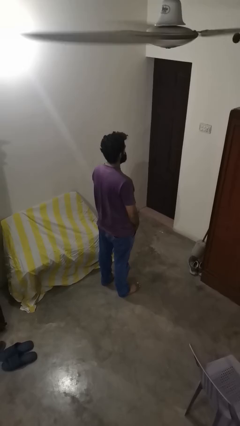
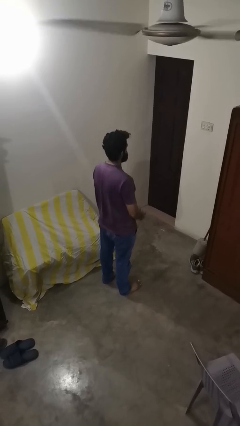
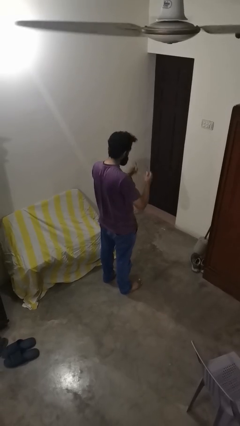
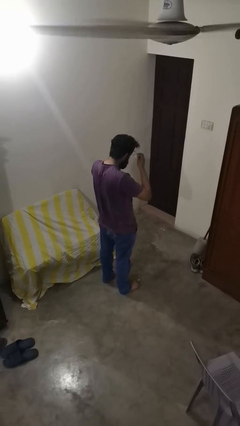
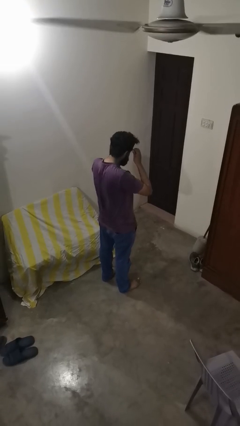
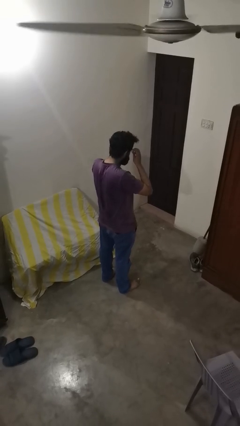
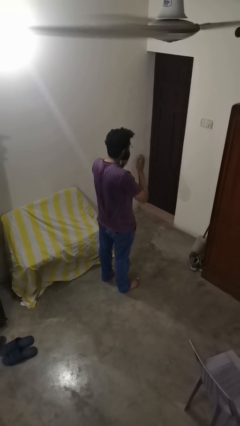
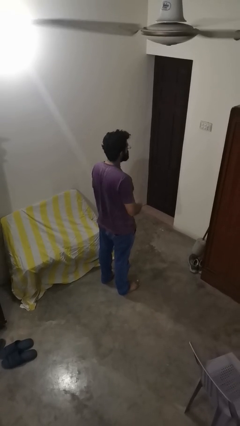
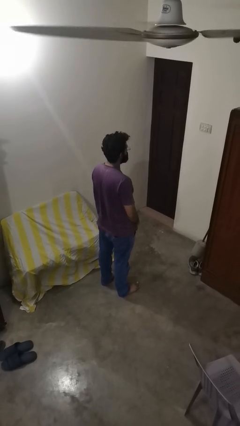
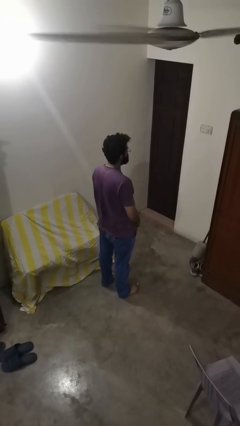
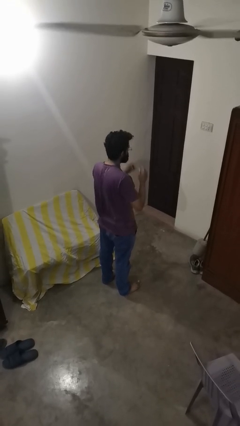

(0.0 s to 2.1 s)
person puts on glasses

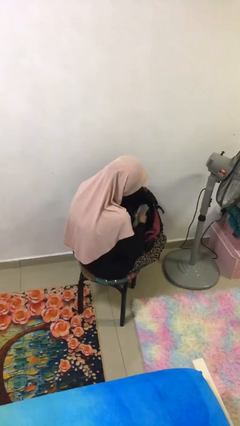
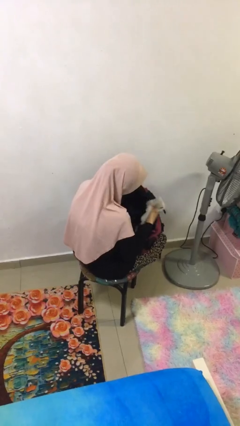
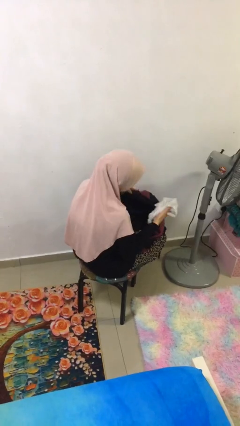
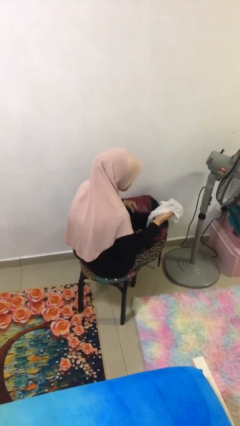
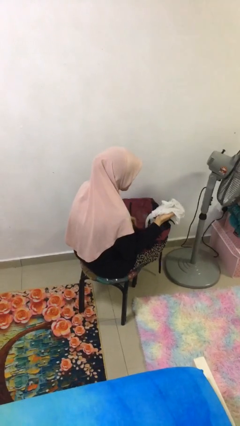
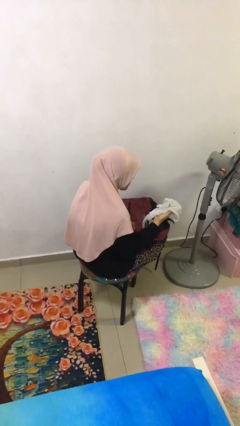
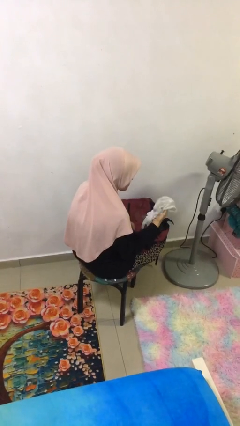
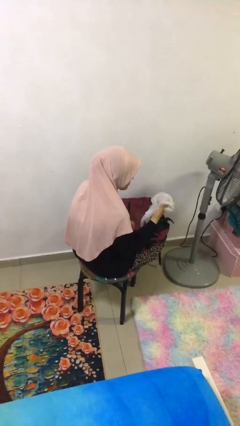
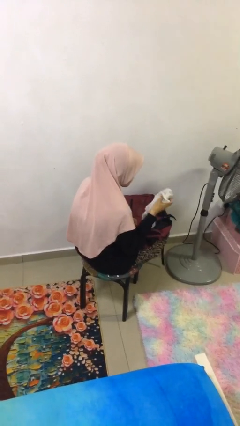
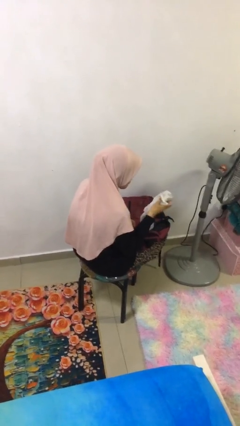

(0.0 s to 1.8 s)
person takes object from backpack

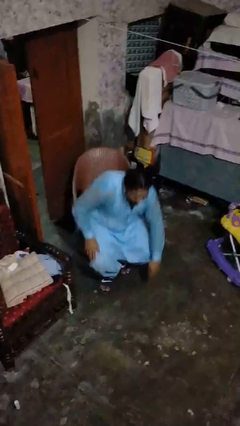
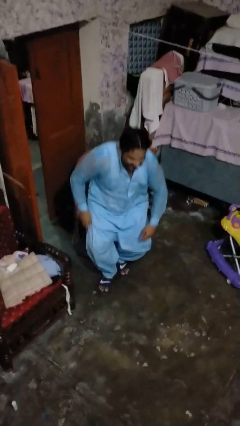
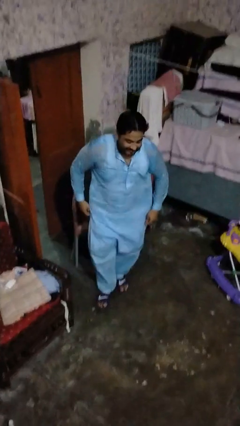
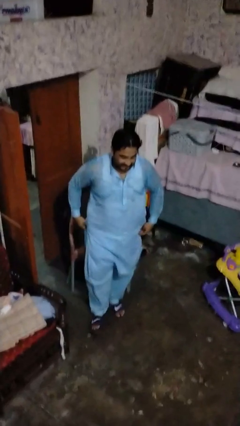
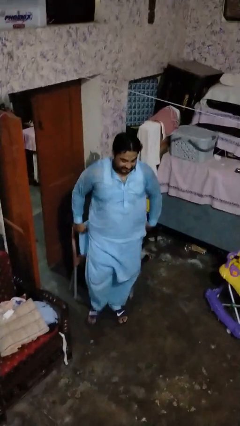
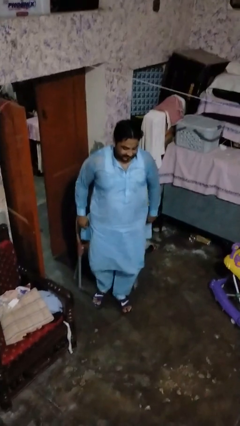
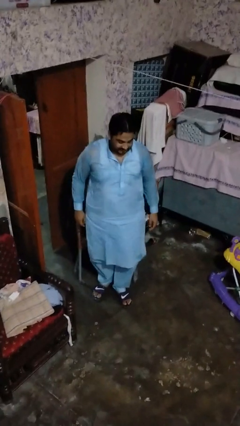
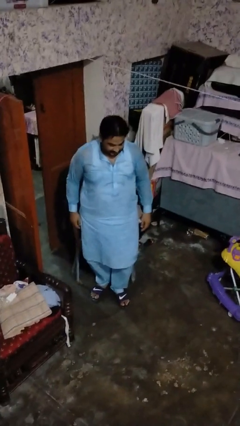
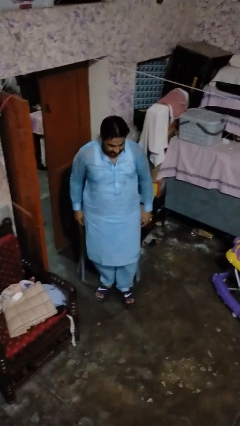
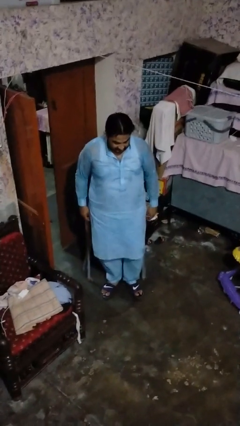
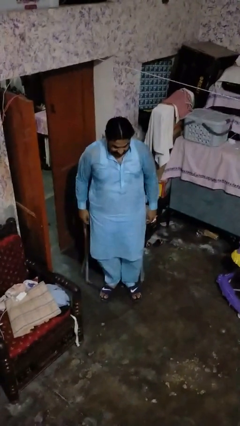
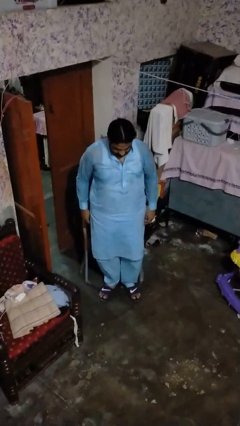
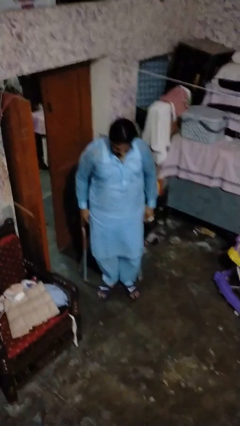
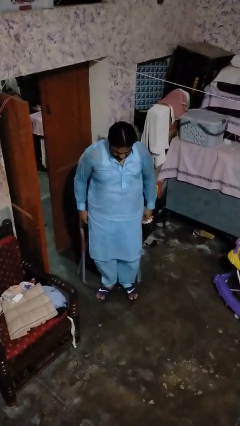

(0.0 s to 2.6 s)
person stands up from floor

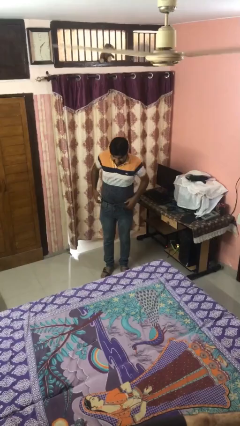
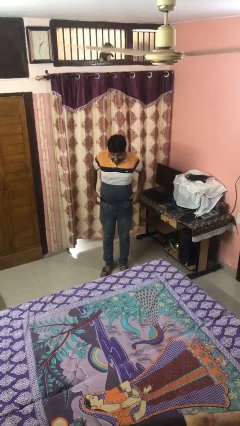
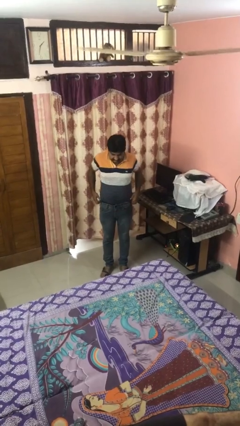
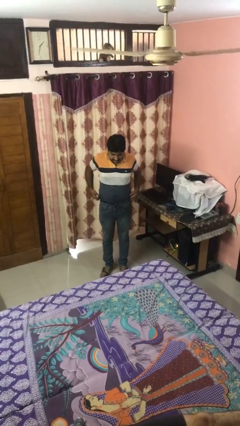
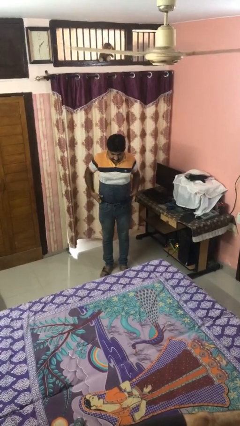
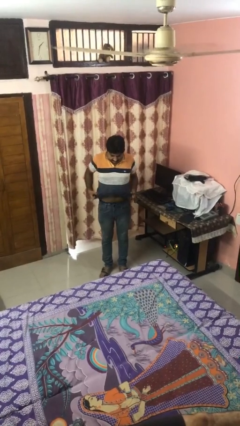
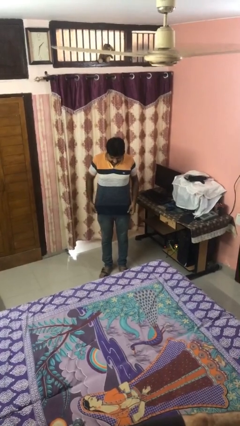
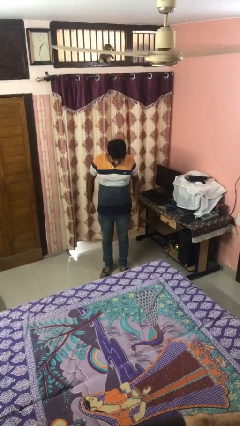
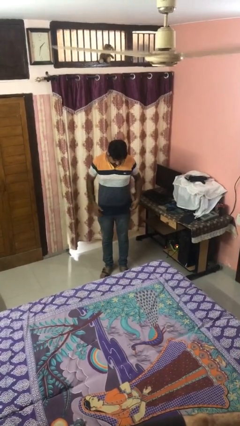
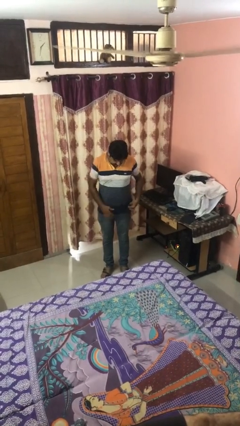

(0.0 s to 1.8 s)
person untucks shirt

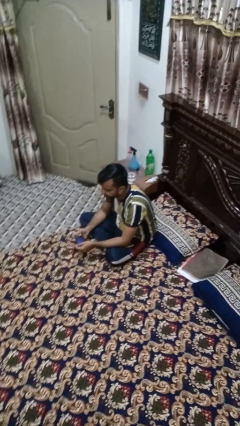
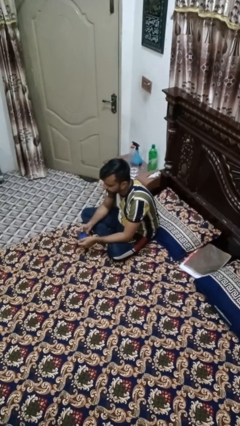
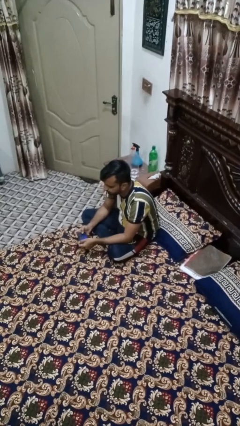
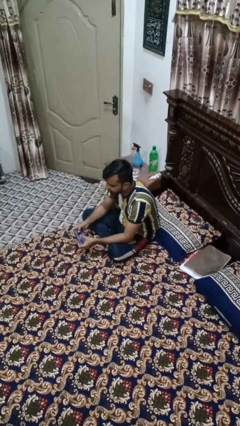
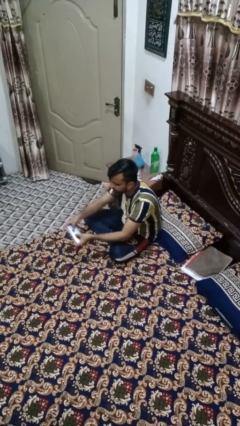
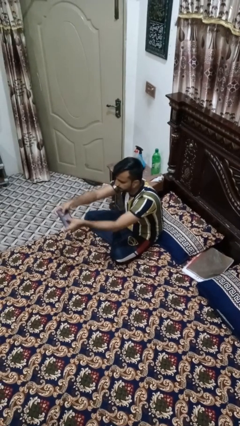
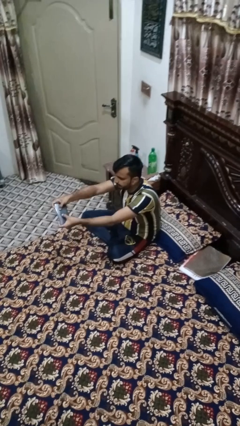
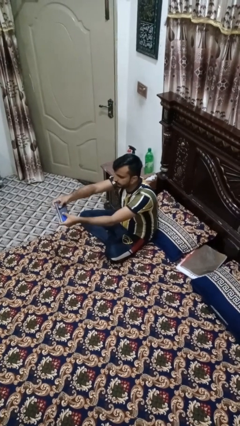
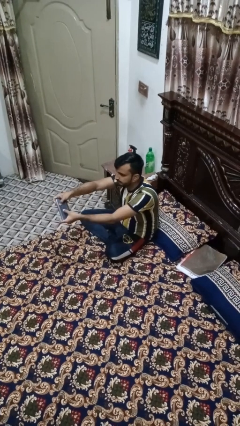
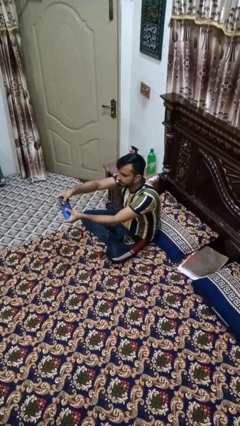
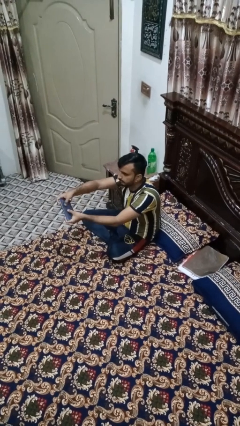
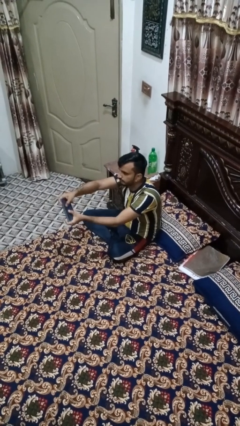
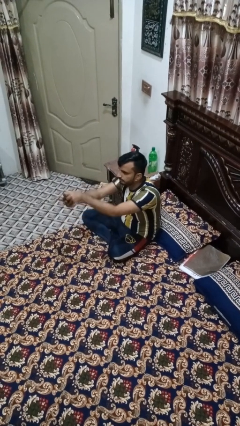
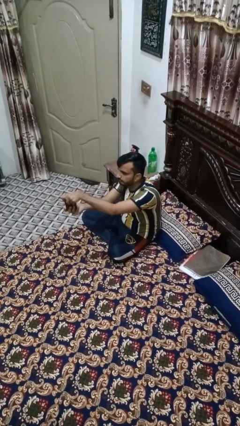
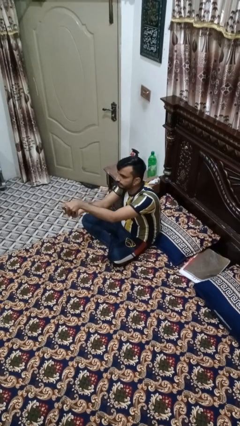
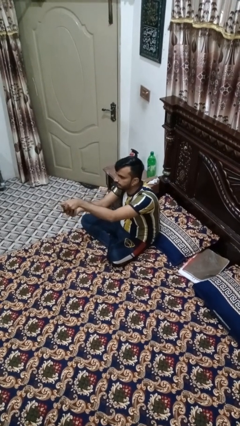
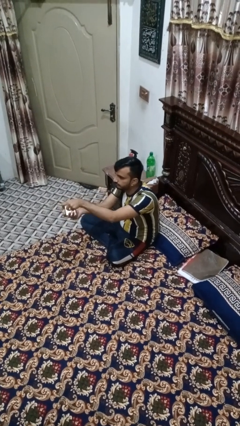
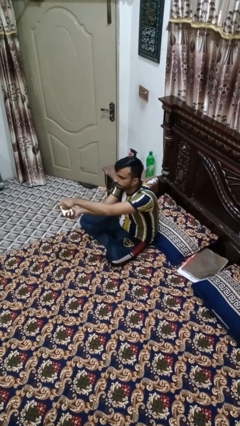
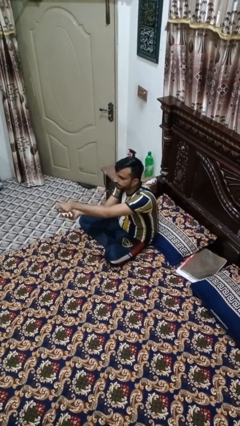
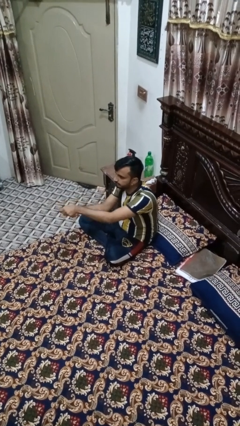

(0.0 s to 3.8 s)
person interacts with handheld game

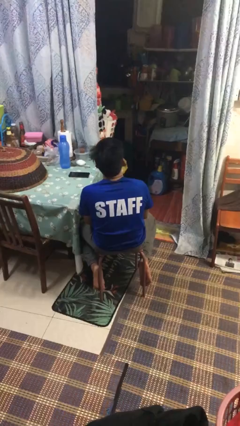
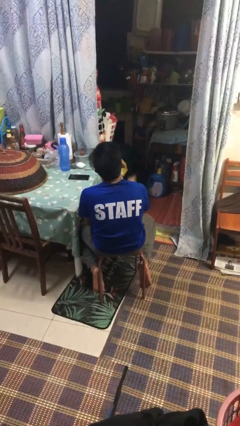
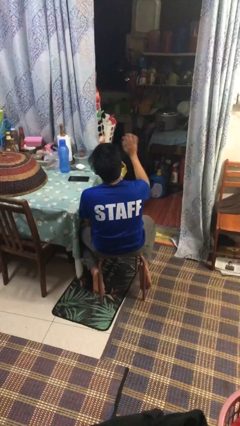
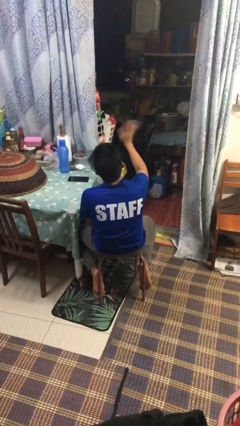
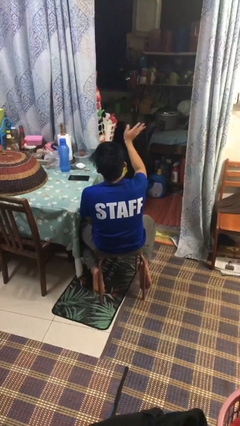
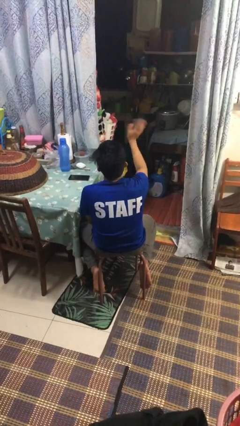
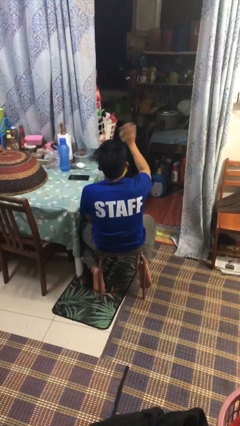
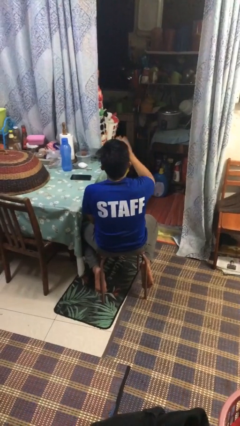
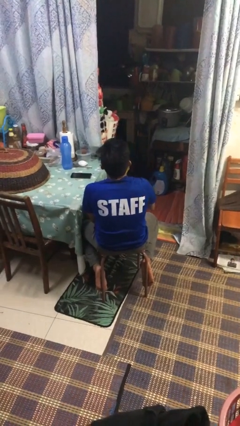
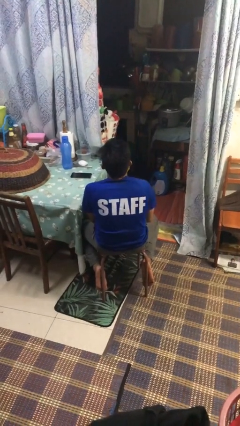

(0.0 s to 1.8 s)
person waves at person

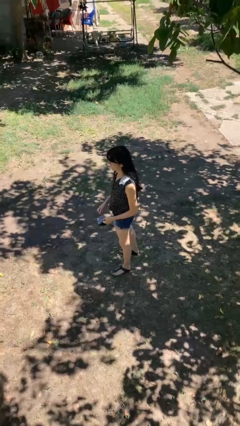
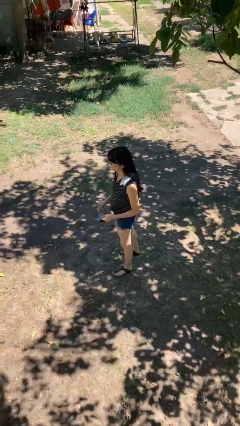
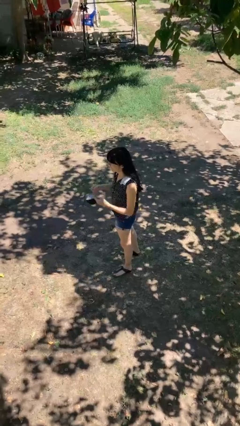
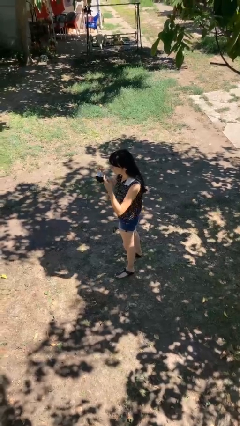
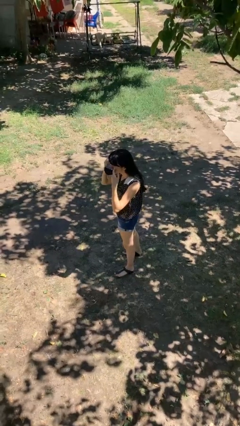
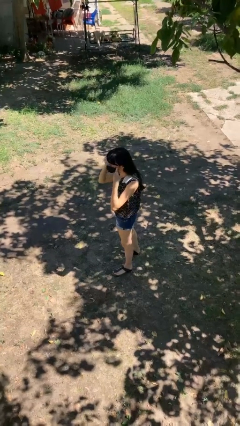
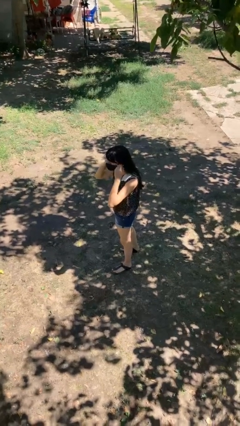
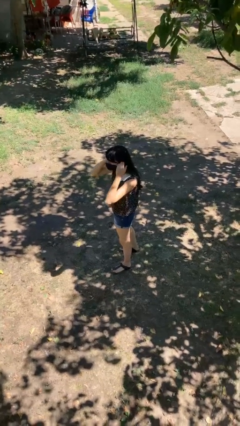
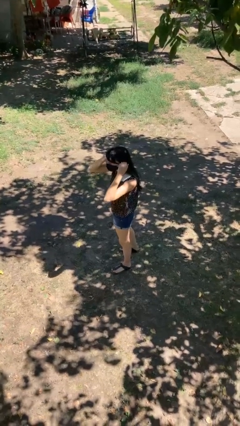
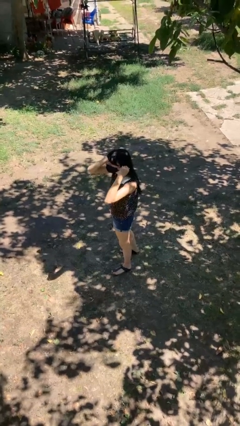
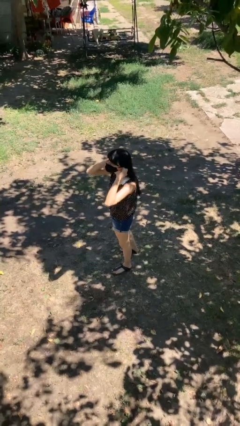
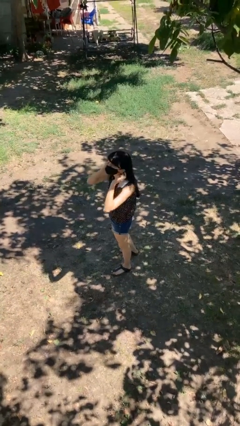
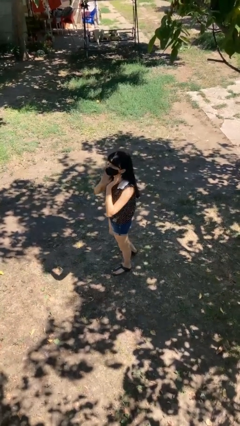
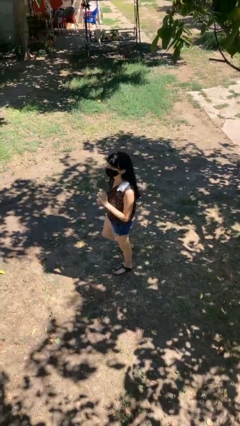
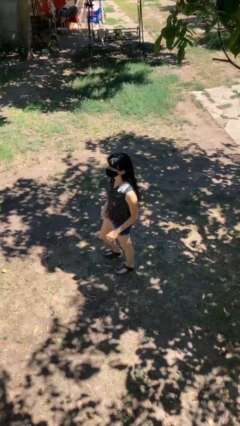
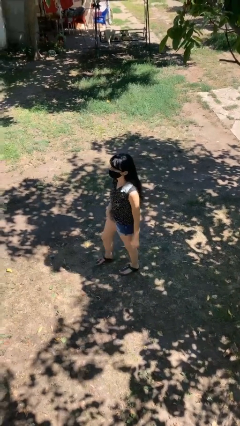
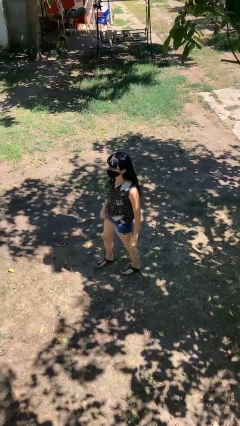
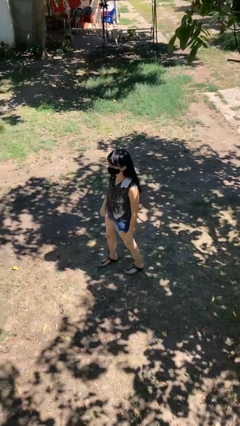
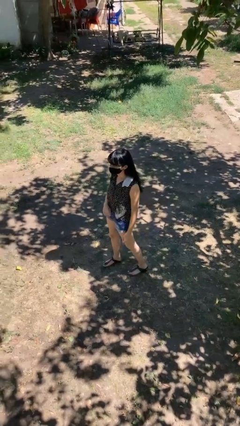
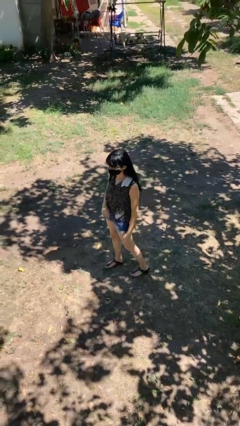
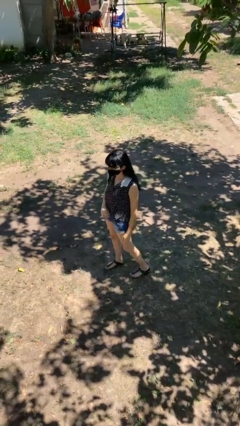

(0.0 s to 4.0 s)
person puts on facemask
